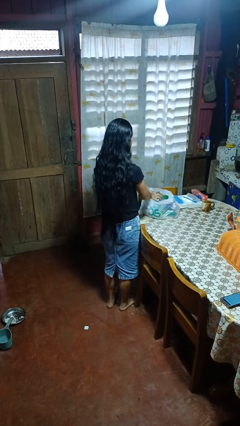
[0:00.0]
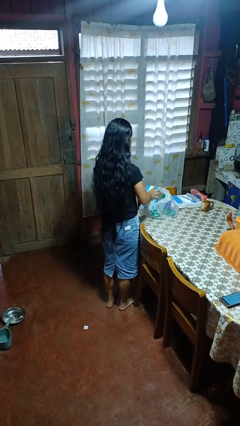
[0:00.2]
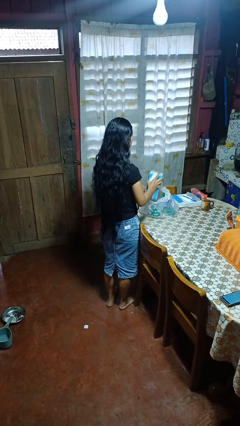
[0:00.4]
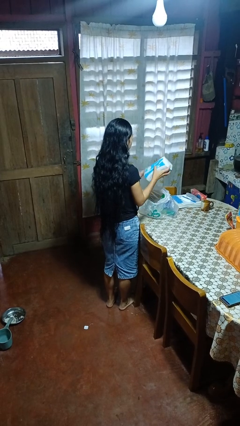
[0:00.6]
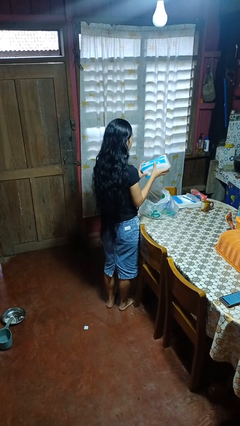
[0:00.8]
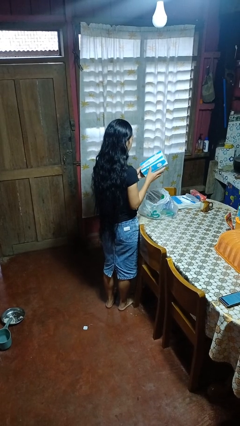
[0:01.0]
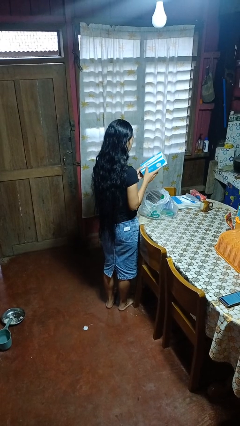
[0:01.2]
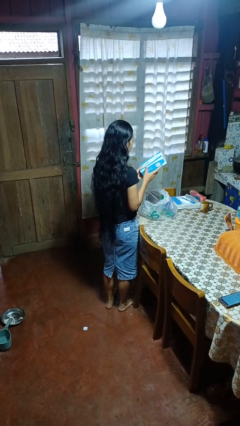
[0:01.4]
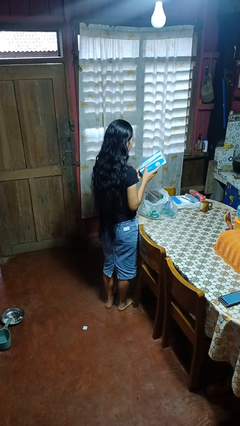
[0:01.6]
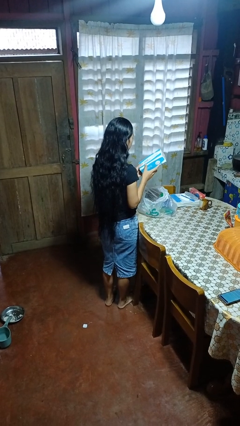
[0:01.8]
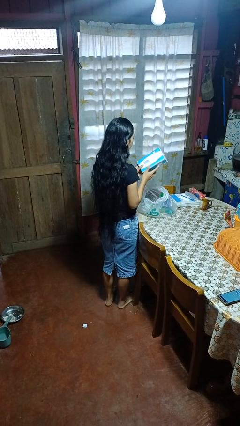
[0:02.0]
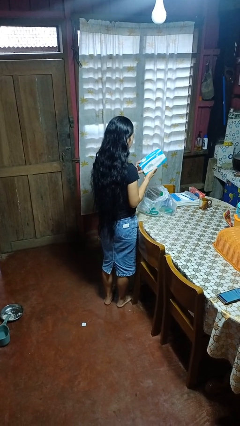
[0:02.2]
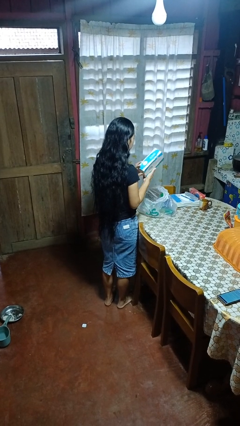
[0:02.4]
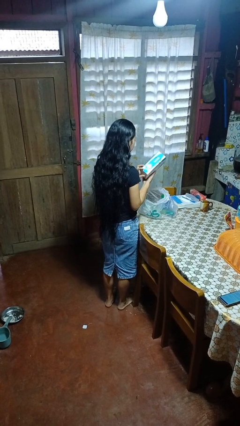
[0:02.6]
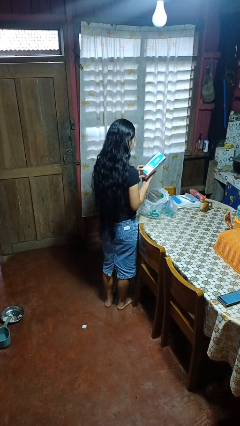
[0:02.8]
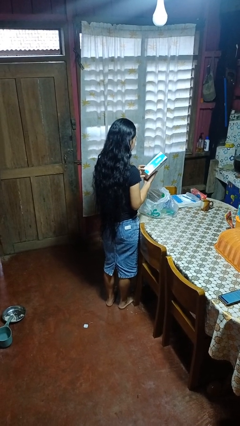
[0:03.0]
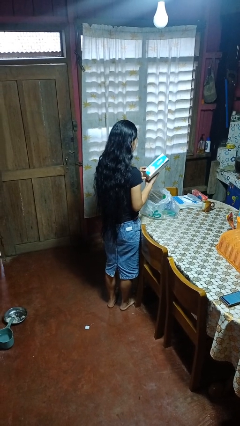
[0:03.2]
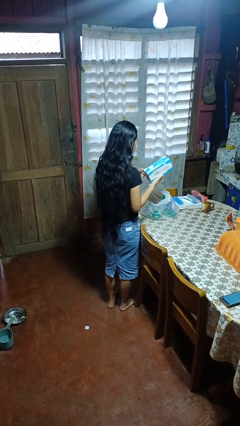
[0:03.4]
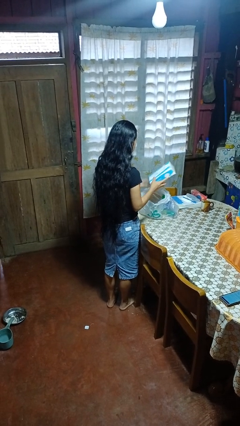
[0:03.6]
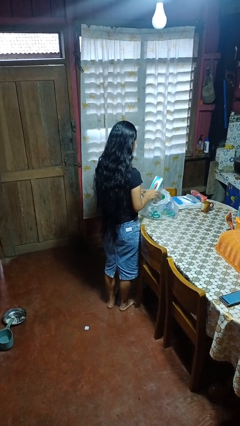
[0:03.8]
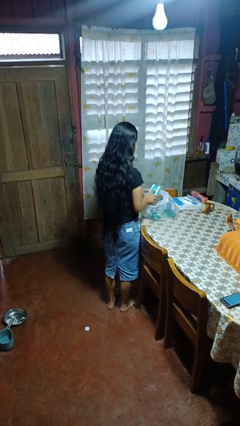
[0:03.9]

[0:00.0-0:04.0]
person takes object from bag

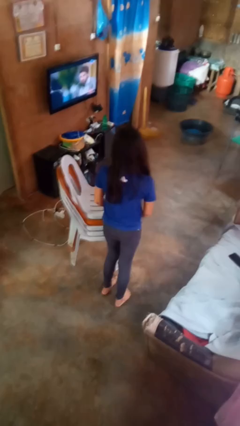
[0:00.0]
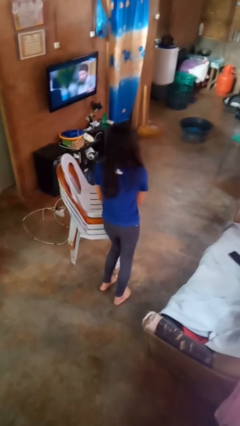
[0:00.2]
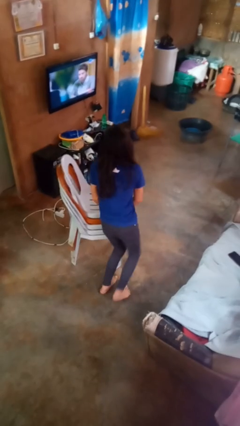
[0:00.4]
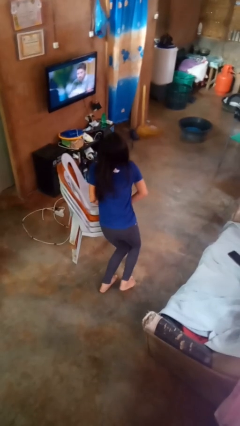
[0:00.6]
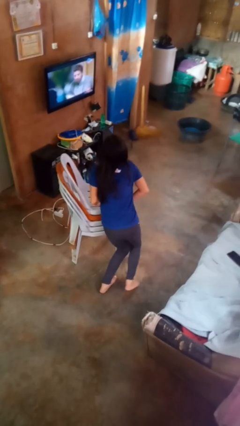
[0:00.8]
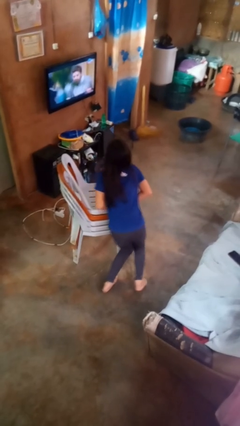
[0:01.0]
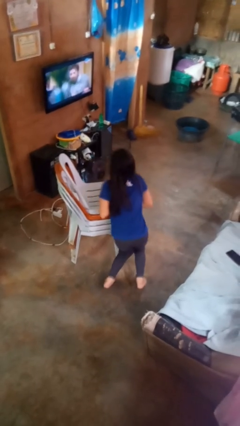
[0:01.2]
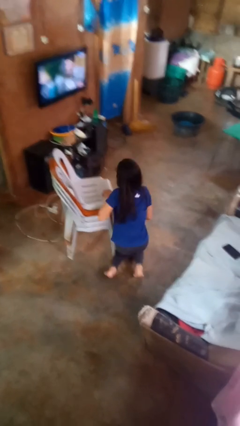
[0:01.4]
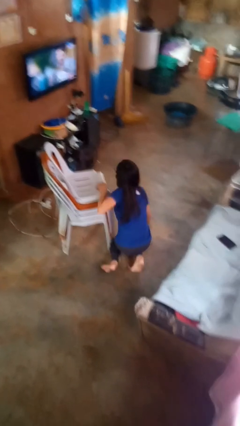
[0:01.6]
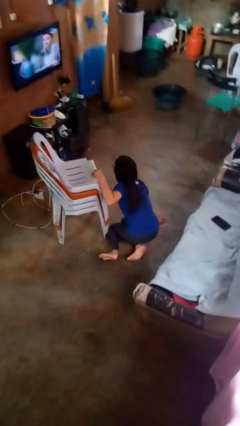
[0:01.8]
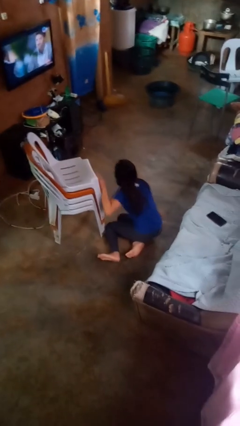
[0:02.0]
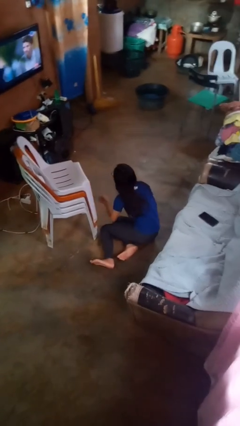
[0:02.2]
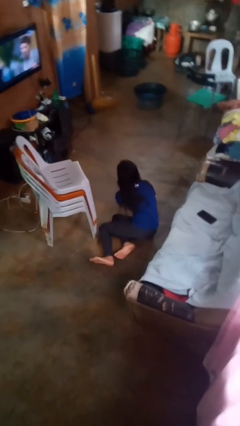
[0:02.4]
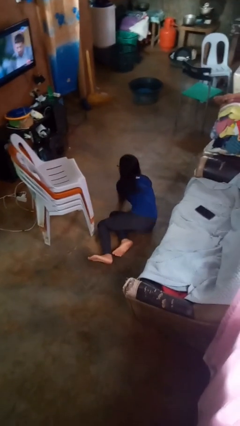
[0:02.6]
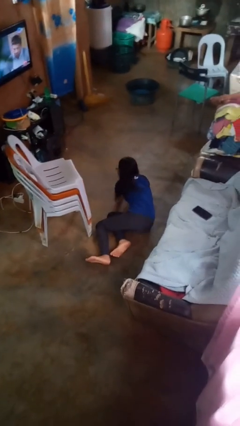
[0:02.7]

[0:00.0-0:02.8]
person lies down on floor

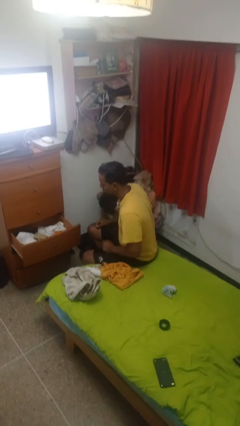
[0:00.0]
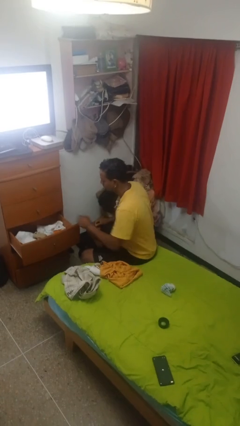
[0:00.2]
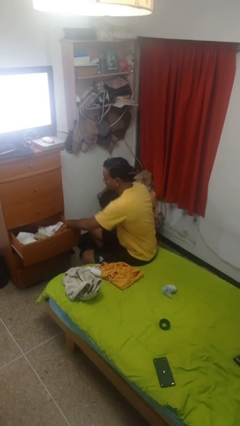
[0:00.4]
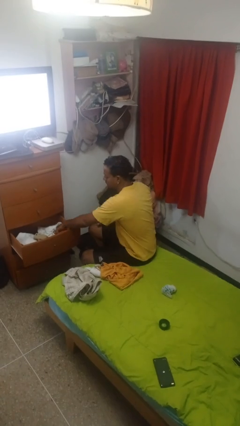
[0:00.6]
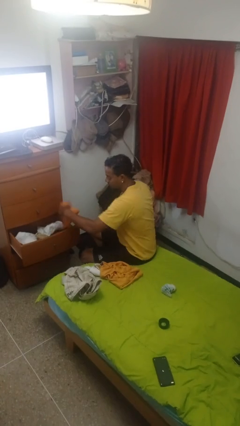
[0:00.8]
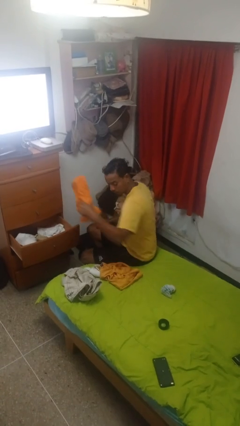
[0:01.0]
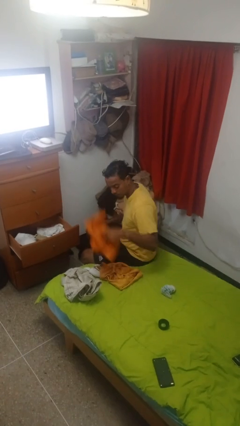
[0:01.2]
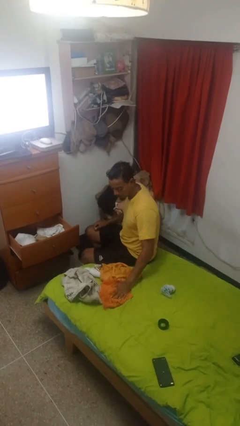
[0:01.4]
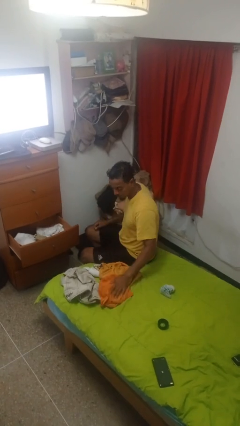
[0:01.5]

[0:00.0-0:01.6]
person takes clothes from dresser

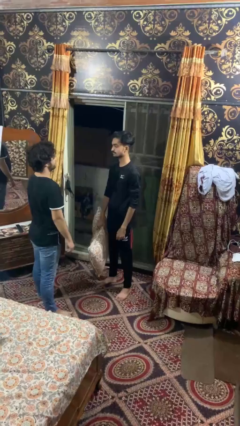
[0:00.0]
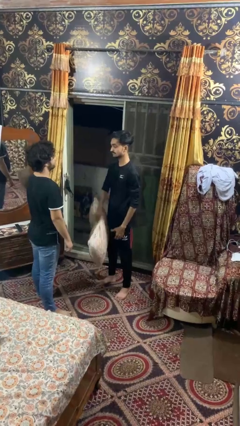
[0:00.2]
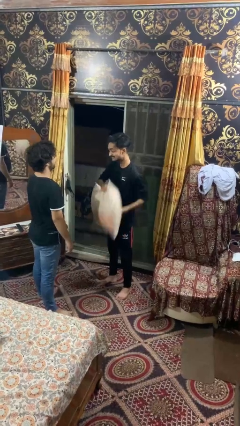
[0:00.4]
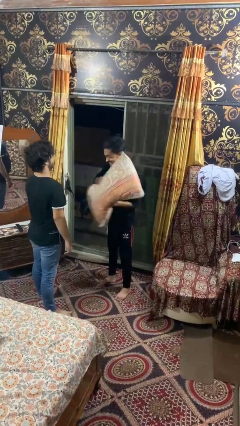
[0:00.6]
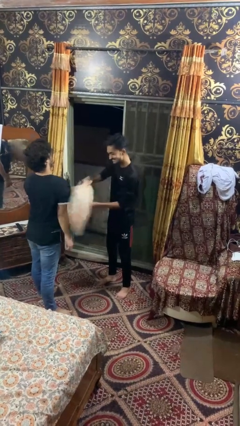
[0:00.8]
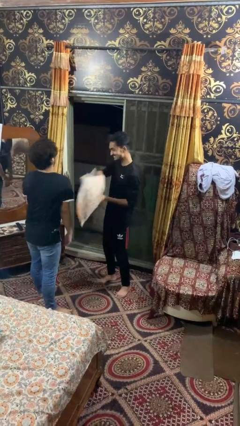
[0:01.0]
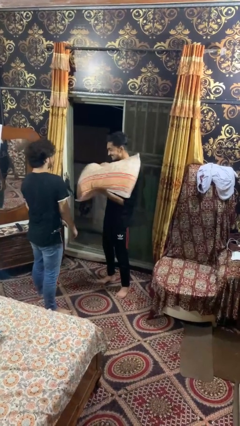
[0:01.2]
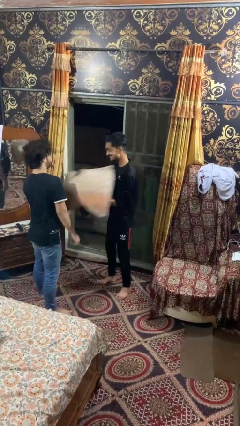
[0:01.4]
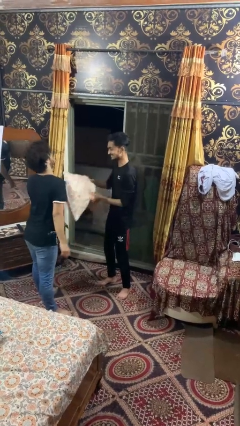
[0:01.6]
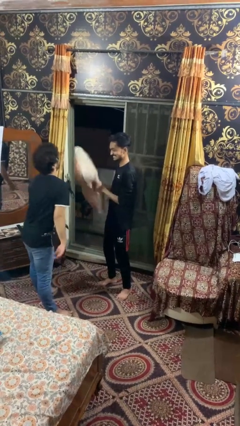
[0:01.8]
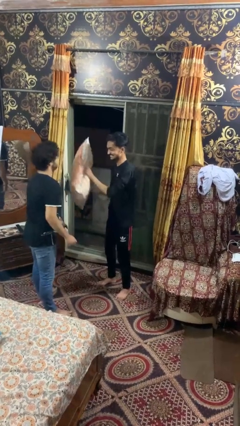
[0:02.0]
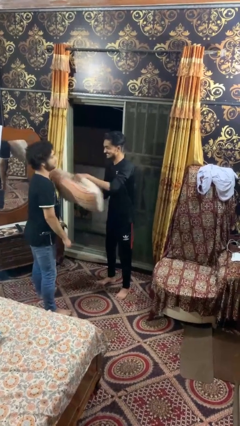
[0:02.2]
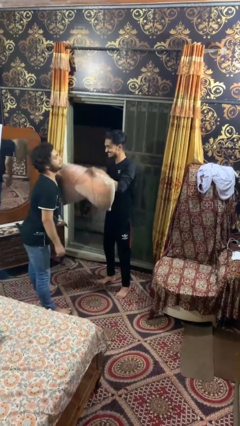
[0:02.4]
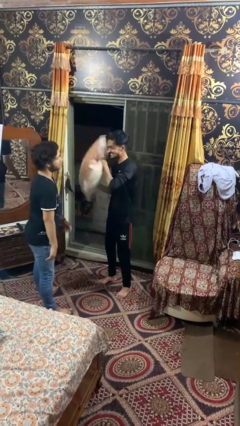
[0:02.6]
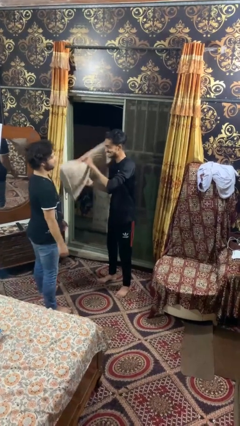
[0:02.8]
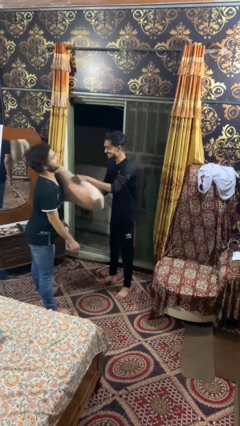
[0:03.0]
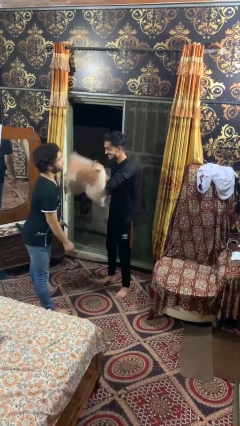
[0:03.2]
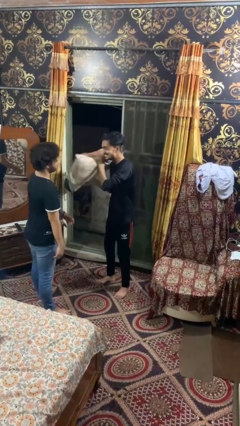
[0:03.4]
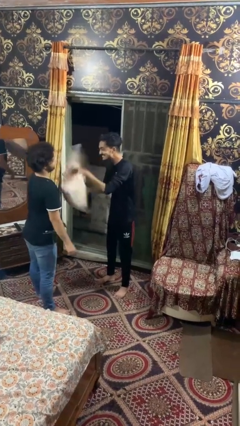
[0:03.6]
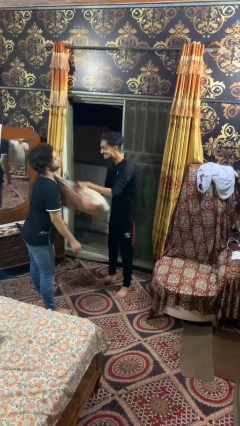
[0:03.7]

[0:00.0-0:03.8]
person hits person with pillow

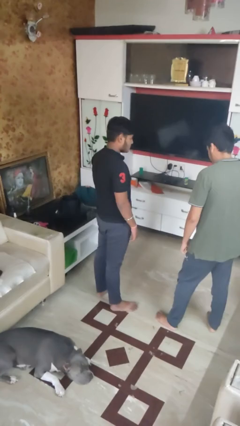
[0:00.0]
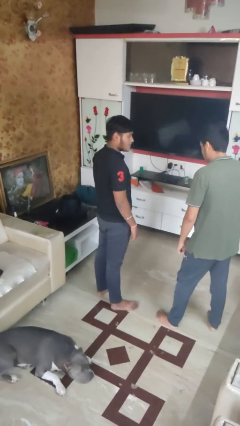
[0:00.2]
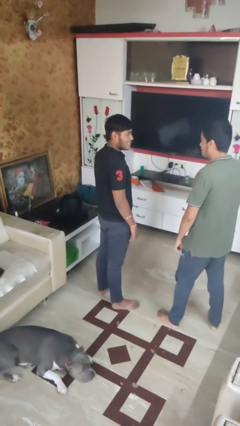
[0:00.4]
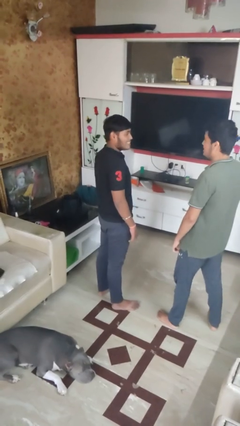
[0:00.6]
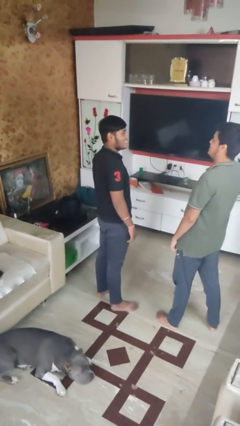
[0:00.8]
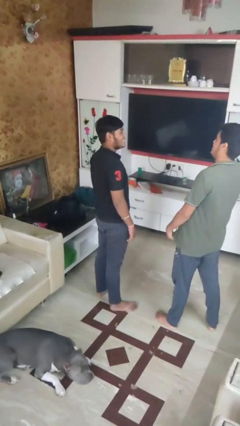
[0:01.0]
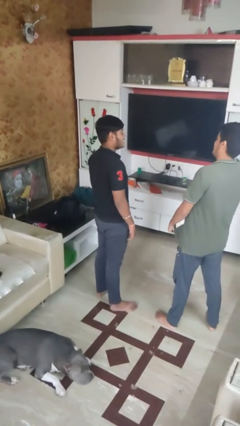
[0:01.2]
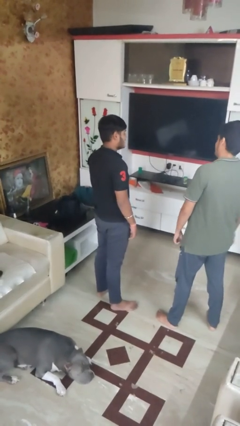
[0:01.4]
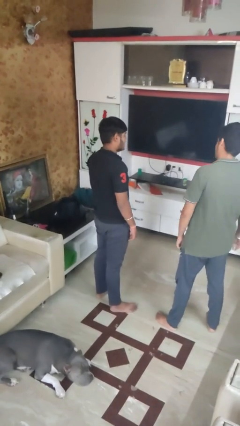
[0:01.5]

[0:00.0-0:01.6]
person laughs with person

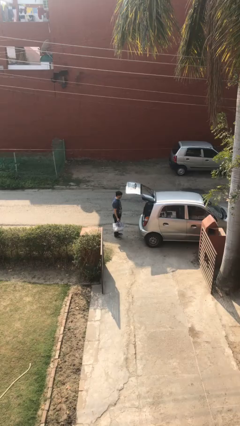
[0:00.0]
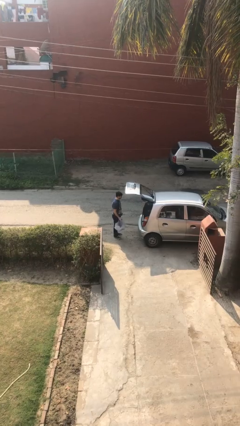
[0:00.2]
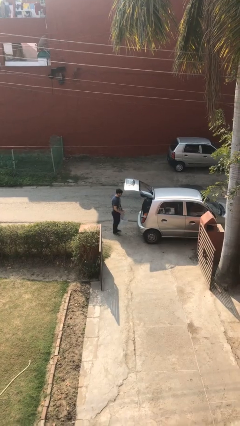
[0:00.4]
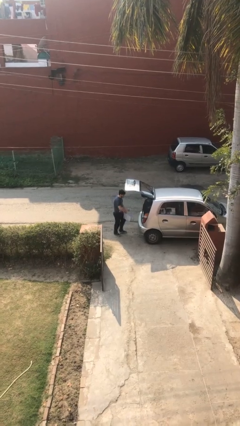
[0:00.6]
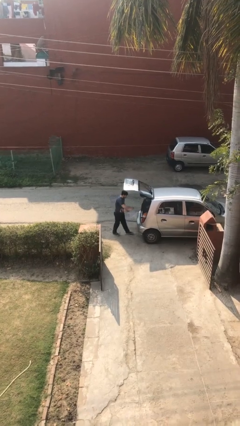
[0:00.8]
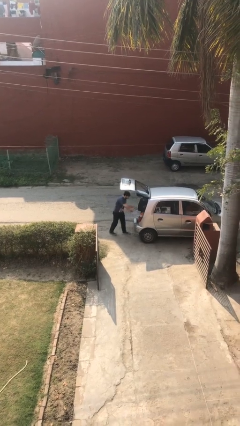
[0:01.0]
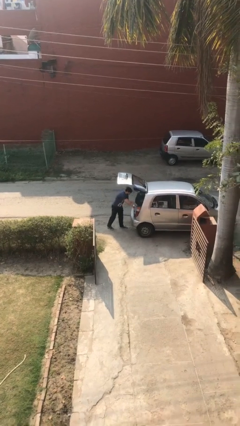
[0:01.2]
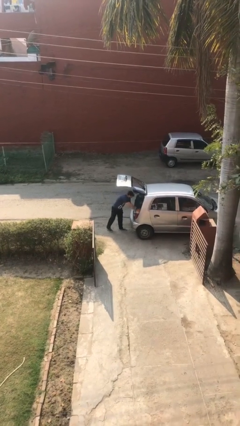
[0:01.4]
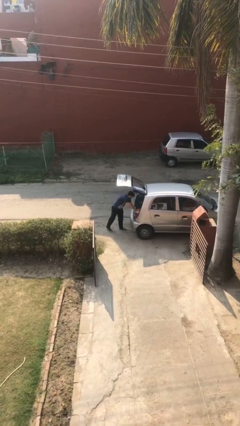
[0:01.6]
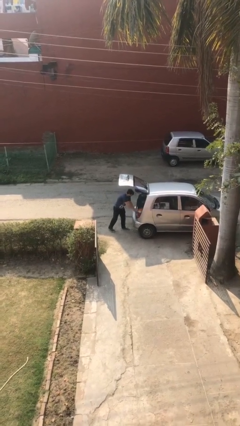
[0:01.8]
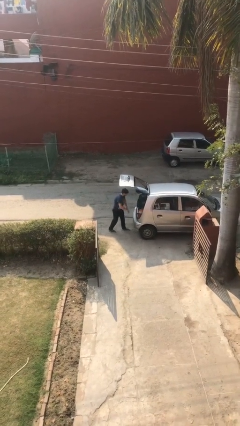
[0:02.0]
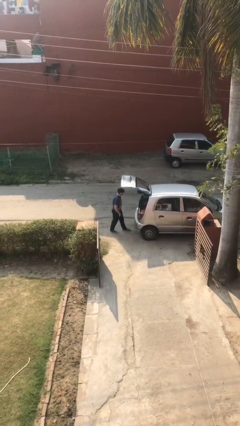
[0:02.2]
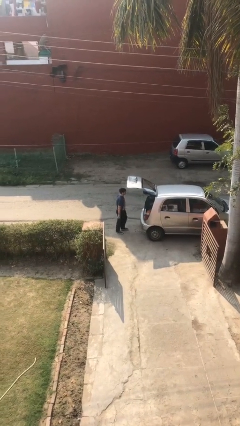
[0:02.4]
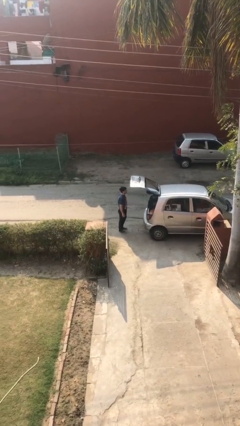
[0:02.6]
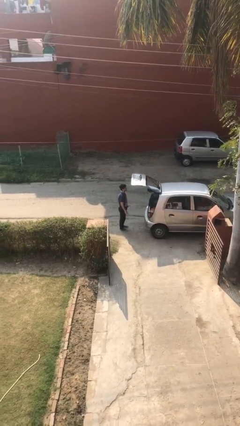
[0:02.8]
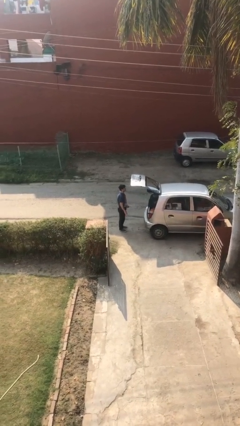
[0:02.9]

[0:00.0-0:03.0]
person loads car

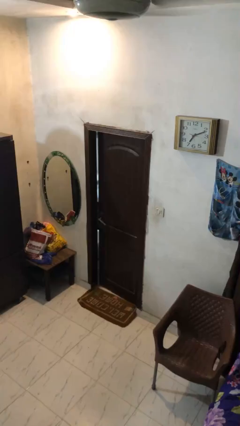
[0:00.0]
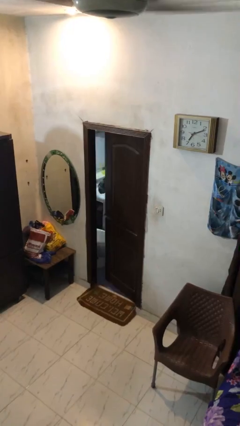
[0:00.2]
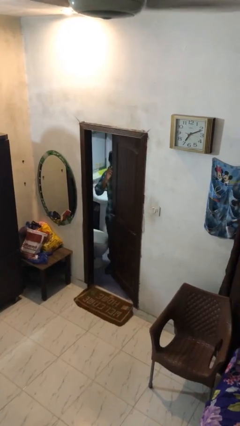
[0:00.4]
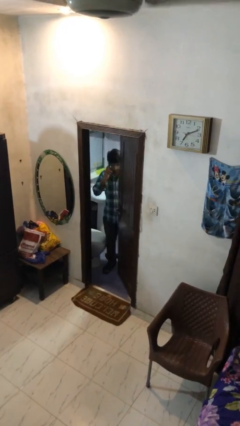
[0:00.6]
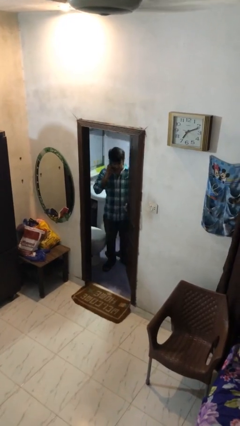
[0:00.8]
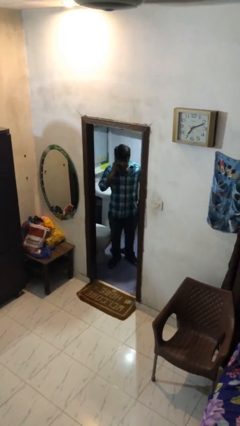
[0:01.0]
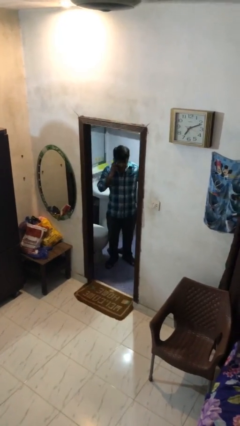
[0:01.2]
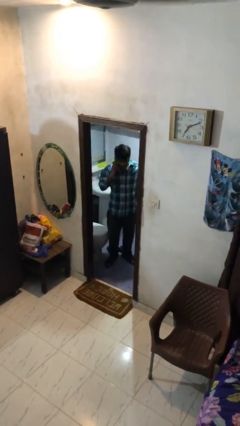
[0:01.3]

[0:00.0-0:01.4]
person opens facility door
